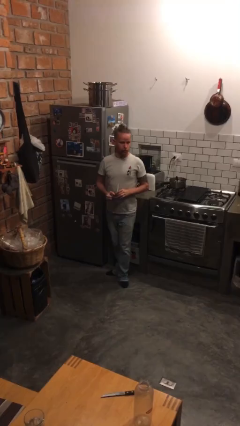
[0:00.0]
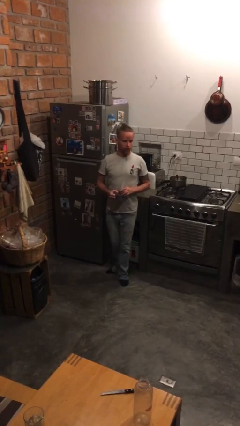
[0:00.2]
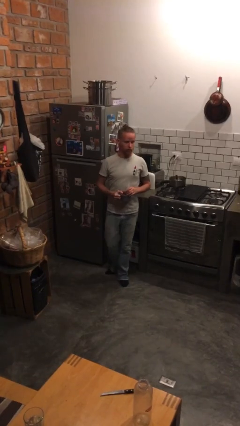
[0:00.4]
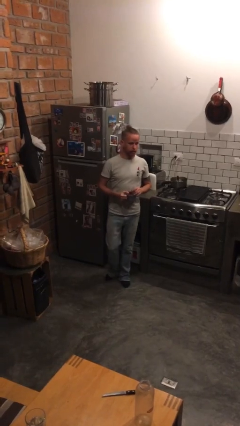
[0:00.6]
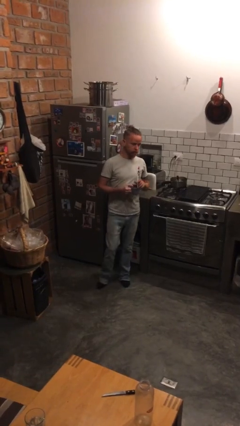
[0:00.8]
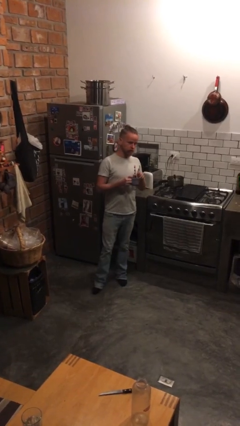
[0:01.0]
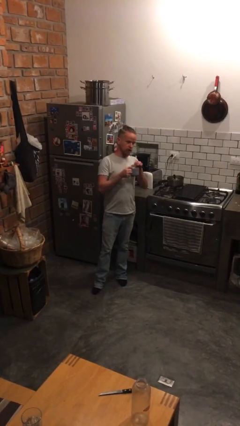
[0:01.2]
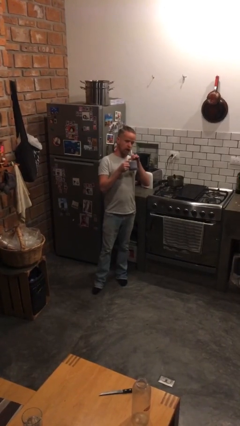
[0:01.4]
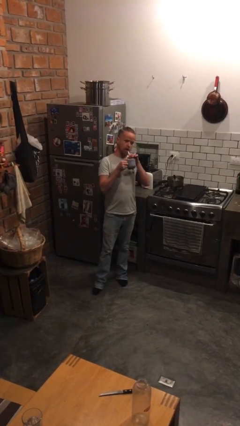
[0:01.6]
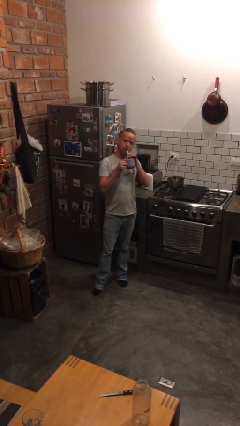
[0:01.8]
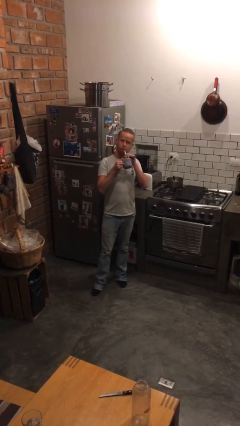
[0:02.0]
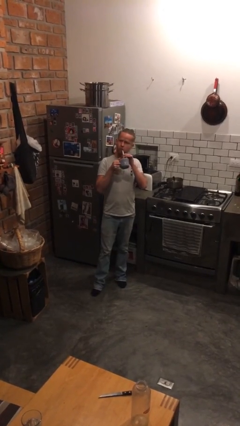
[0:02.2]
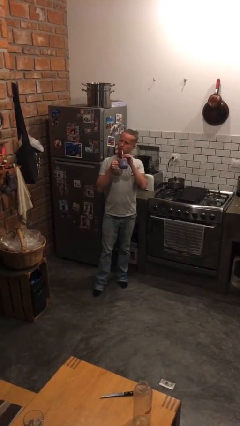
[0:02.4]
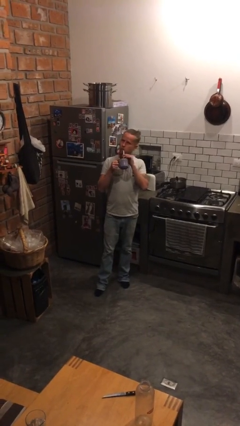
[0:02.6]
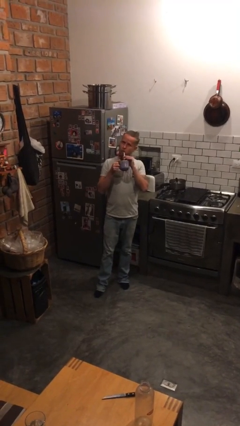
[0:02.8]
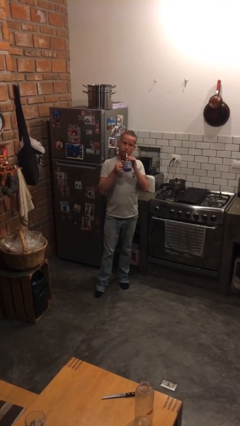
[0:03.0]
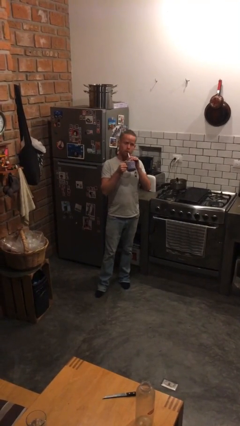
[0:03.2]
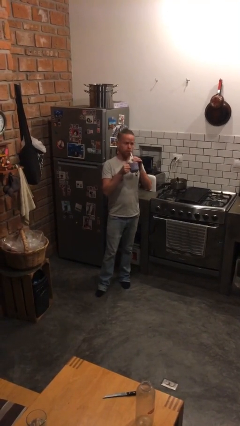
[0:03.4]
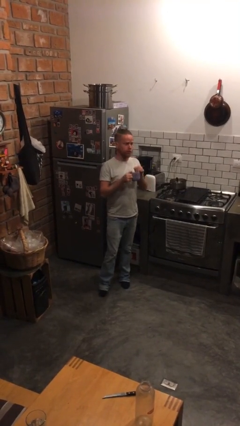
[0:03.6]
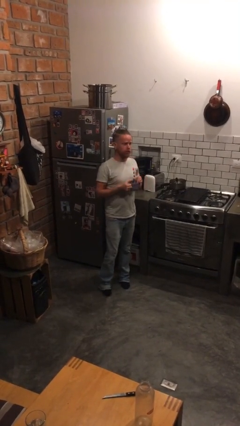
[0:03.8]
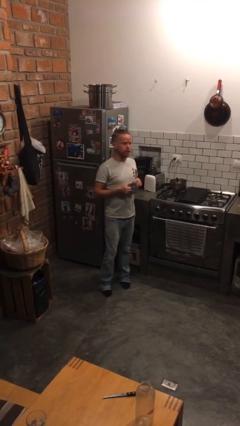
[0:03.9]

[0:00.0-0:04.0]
person drinks from straw

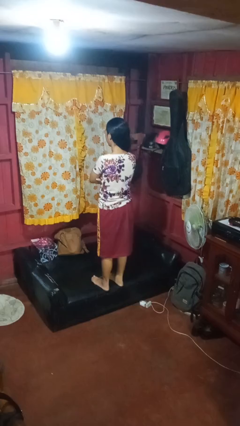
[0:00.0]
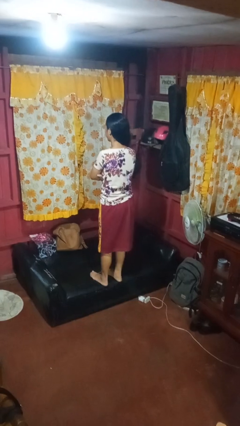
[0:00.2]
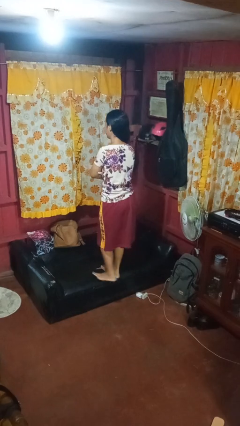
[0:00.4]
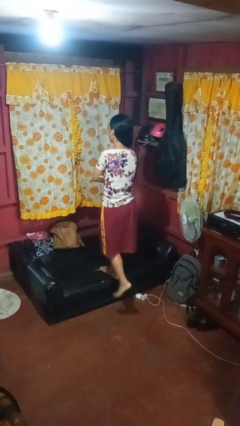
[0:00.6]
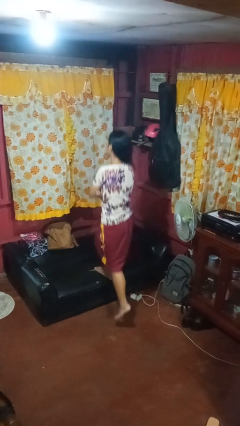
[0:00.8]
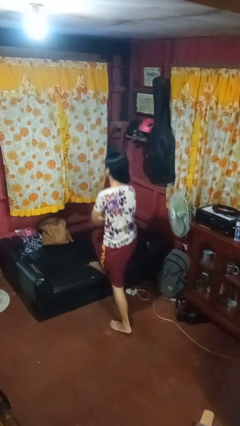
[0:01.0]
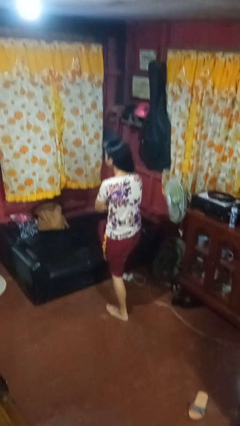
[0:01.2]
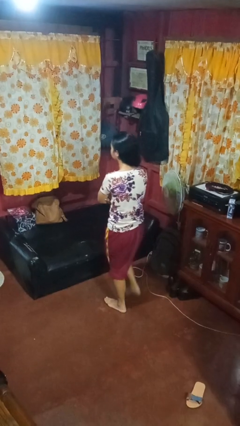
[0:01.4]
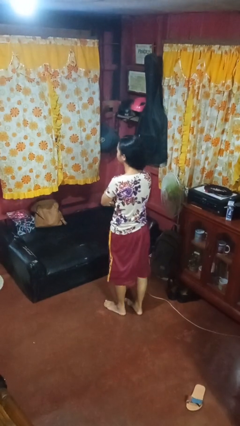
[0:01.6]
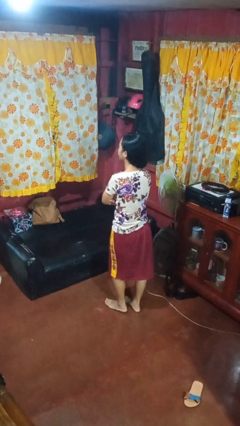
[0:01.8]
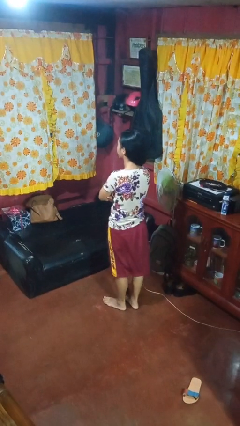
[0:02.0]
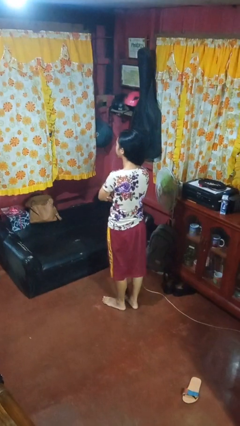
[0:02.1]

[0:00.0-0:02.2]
person climbs off couch

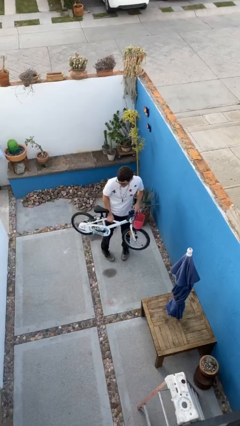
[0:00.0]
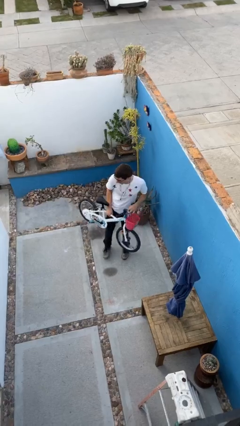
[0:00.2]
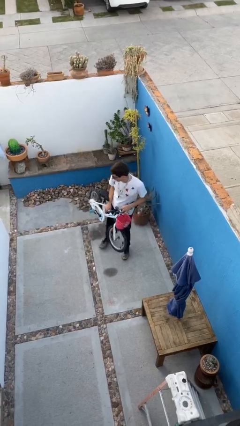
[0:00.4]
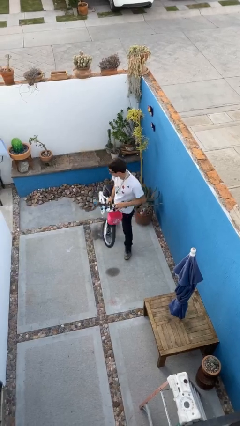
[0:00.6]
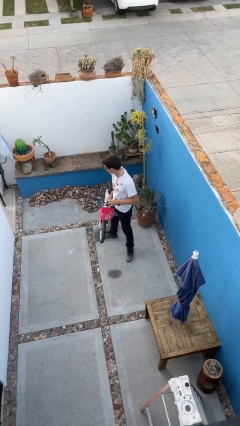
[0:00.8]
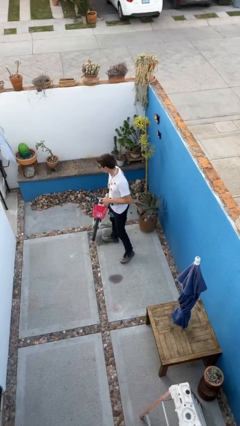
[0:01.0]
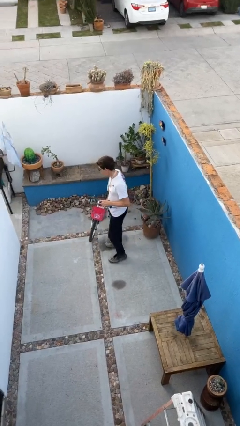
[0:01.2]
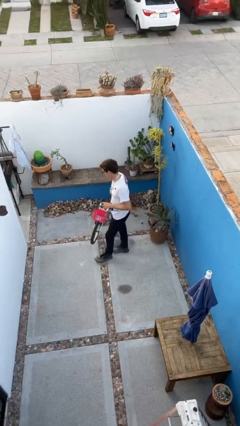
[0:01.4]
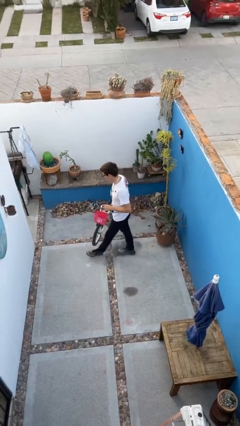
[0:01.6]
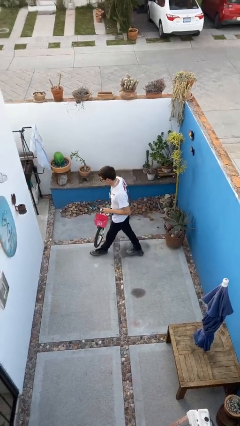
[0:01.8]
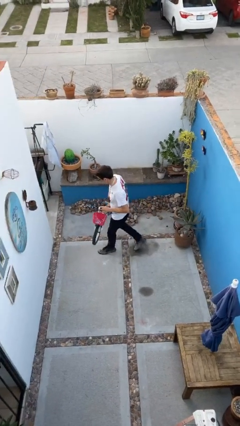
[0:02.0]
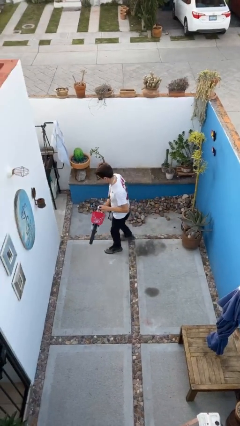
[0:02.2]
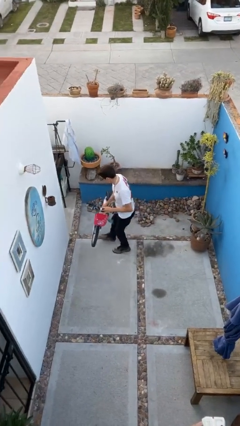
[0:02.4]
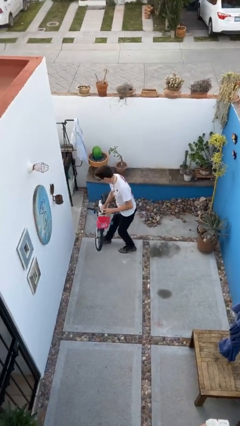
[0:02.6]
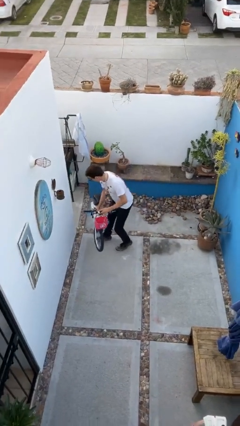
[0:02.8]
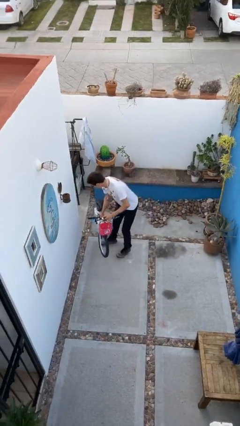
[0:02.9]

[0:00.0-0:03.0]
person carries heavy object

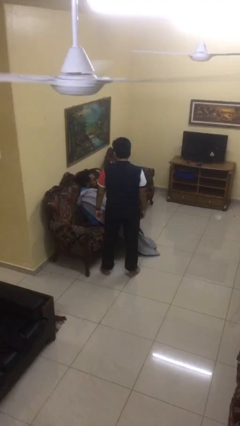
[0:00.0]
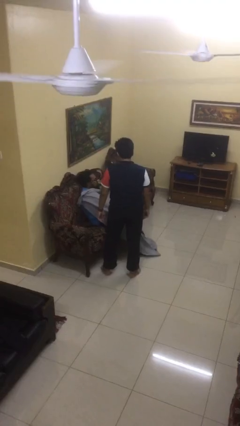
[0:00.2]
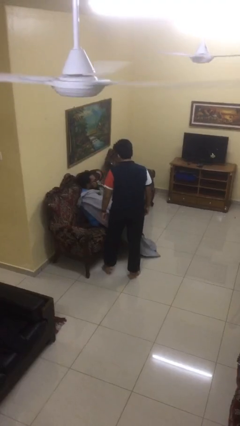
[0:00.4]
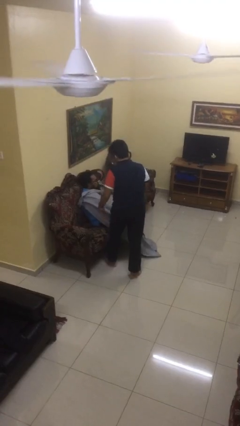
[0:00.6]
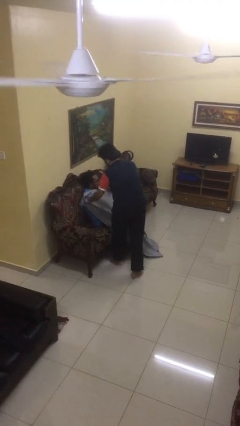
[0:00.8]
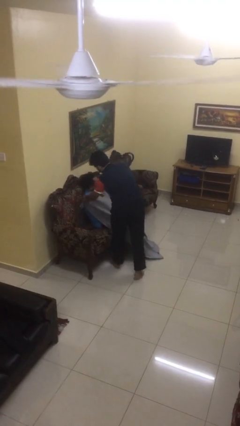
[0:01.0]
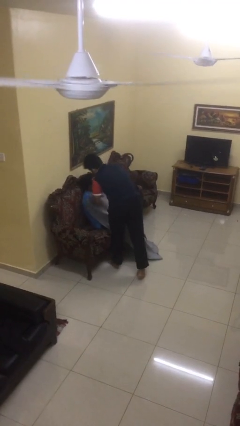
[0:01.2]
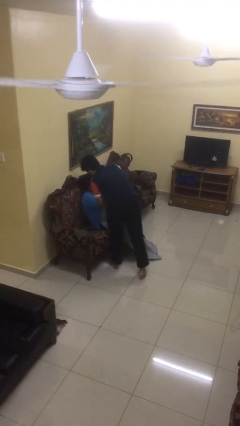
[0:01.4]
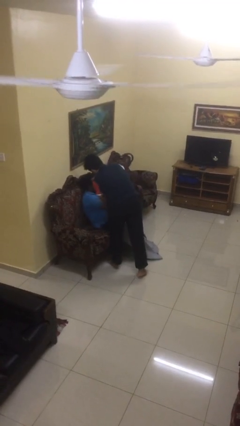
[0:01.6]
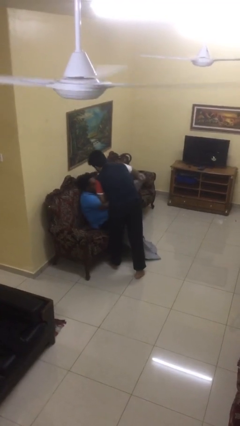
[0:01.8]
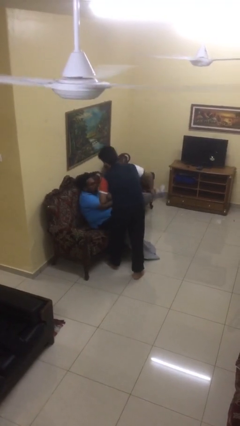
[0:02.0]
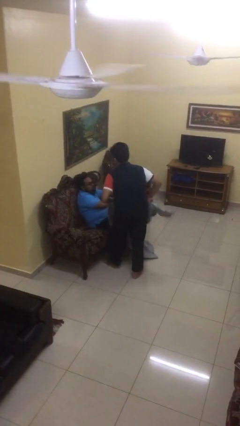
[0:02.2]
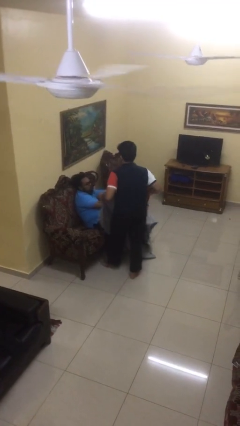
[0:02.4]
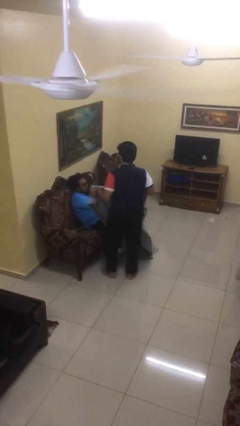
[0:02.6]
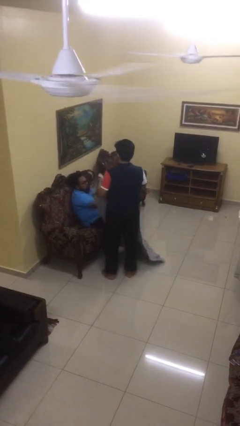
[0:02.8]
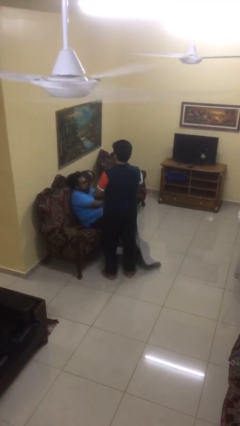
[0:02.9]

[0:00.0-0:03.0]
person uncovers friend with blanket

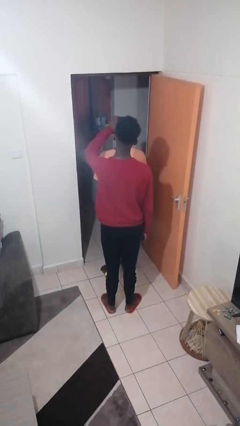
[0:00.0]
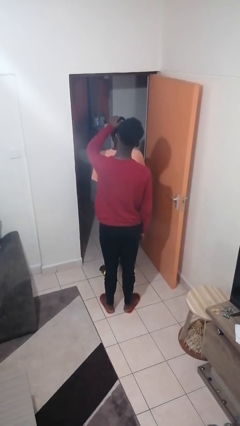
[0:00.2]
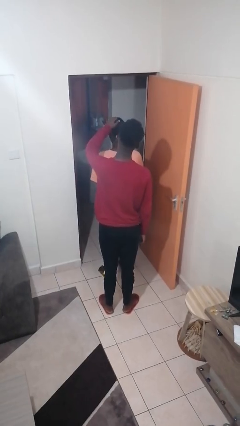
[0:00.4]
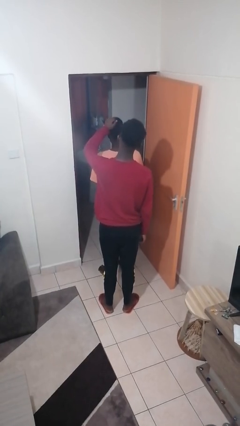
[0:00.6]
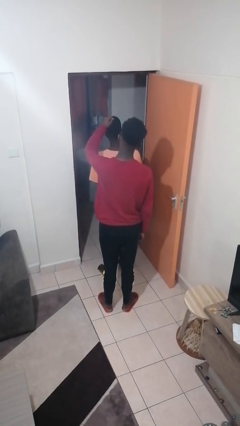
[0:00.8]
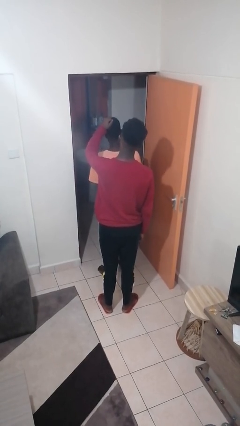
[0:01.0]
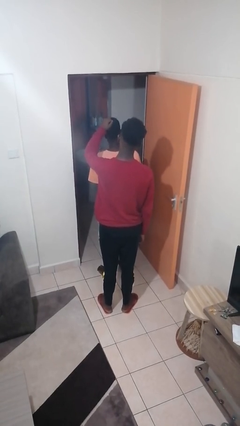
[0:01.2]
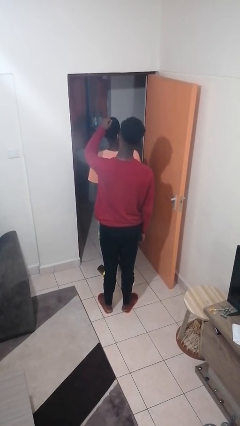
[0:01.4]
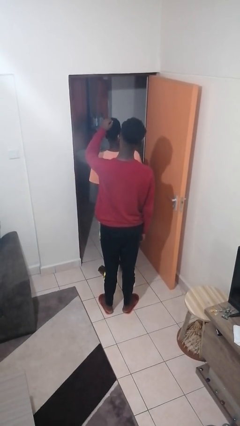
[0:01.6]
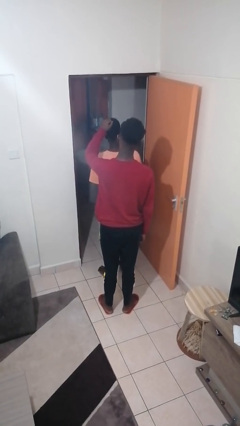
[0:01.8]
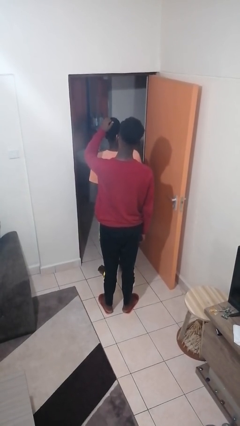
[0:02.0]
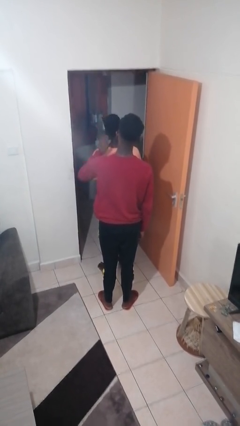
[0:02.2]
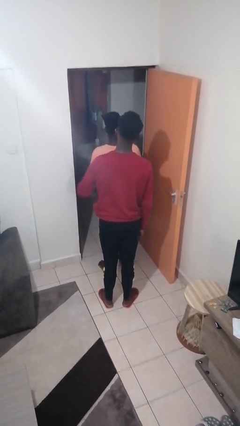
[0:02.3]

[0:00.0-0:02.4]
person grabs person by hair

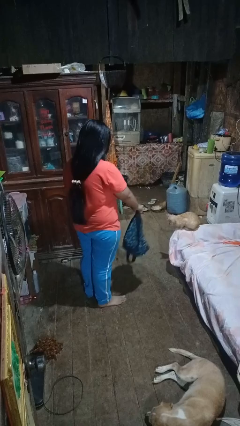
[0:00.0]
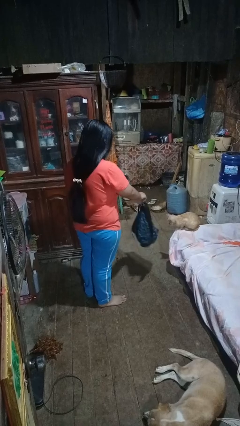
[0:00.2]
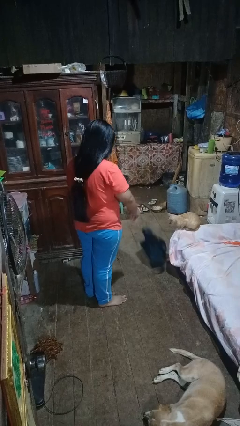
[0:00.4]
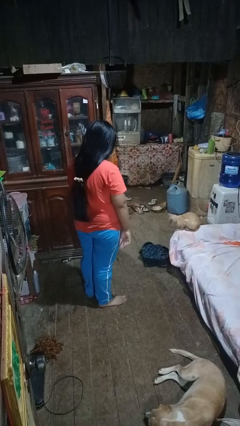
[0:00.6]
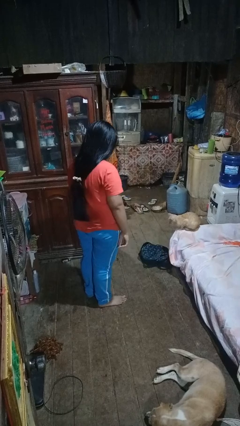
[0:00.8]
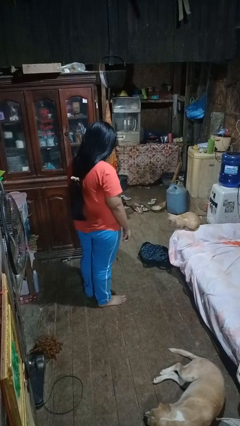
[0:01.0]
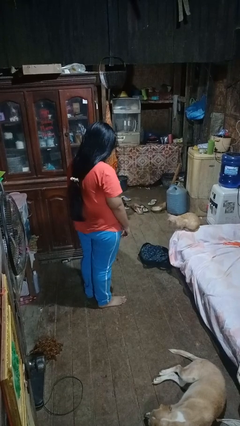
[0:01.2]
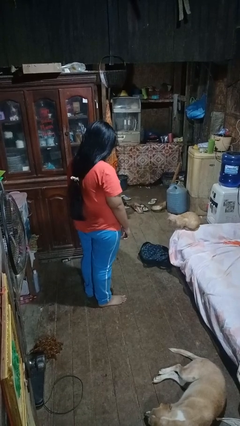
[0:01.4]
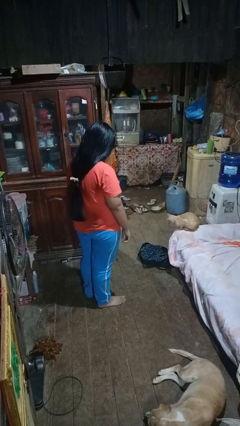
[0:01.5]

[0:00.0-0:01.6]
person throws object to ground

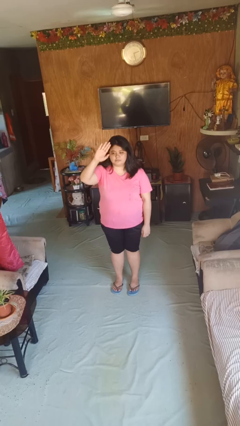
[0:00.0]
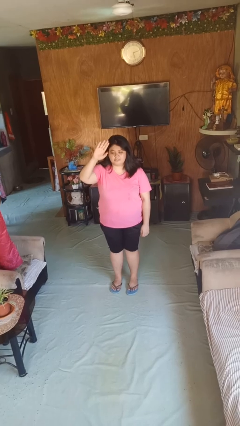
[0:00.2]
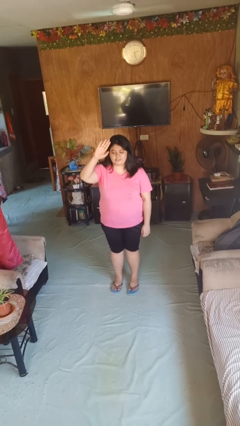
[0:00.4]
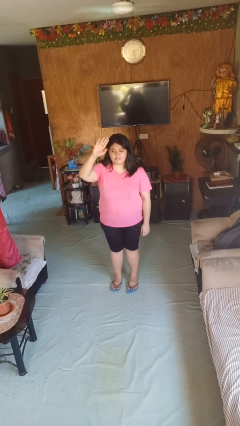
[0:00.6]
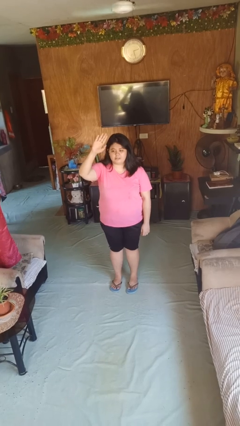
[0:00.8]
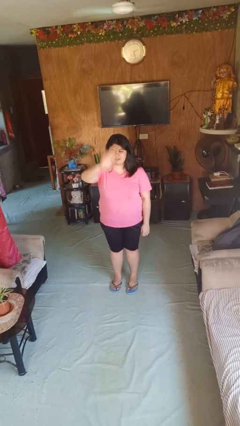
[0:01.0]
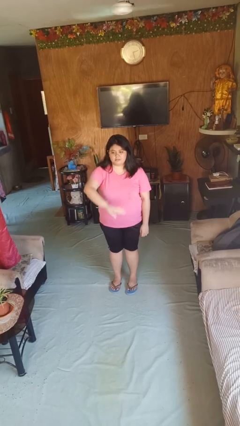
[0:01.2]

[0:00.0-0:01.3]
person gestures swipe down
